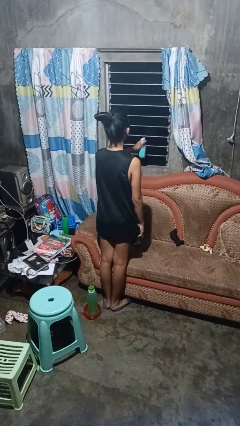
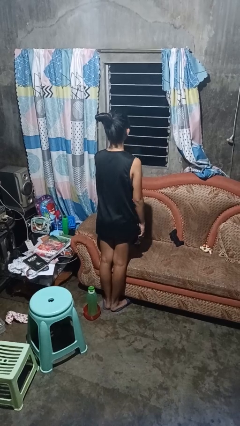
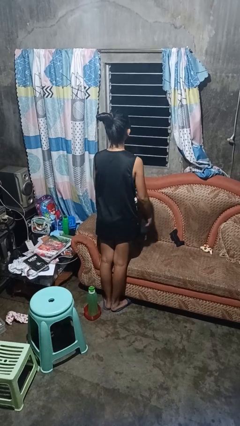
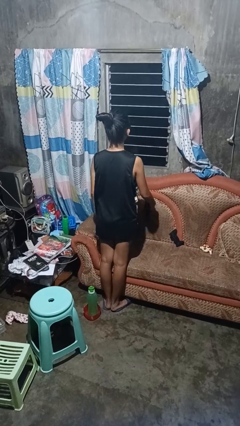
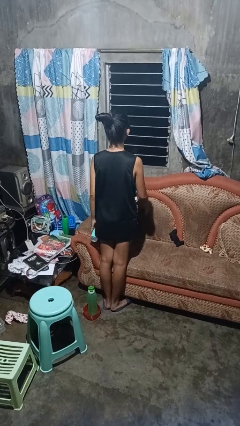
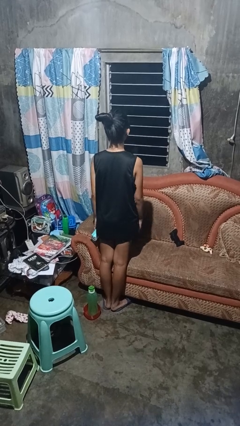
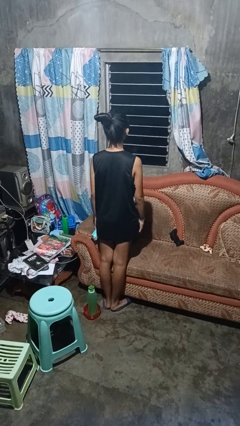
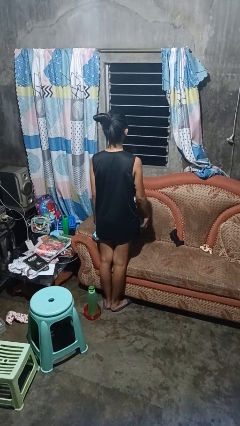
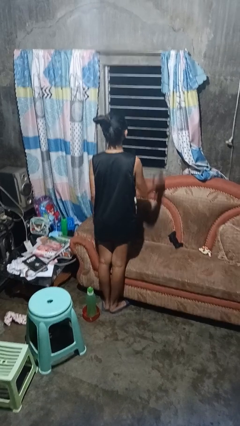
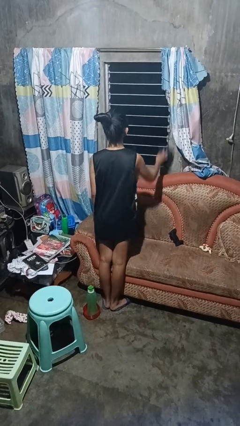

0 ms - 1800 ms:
person sprays from bottle

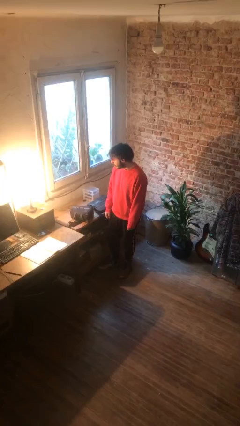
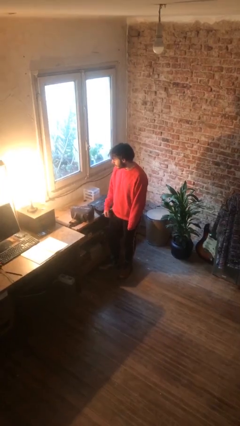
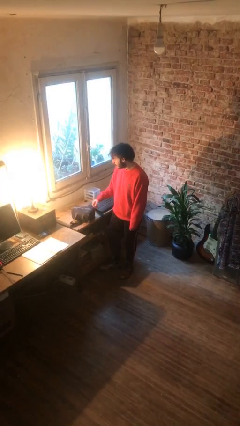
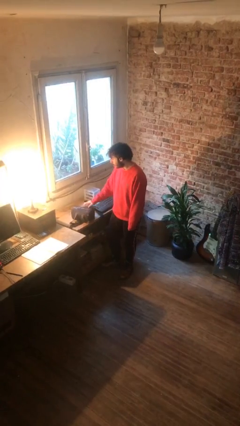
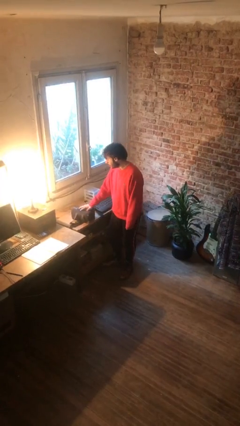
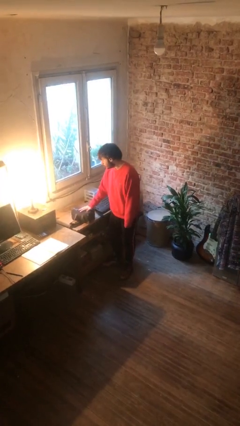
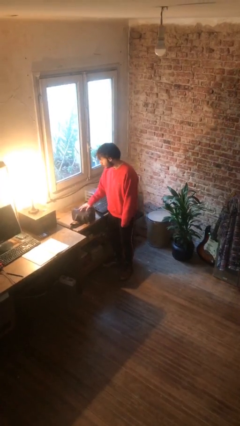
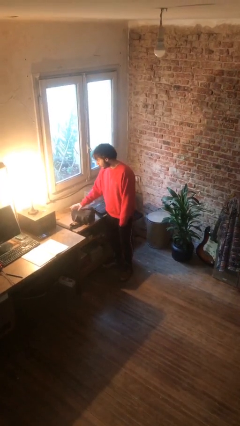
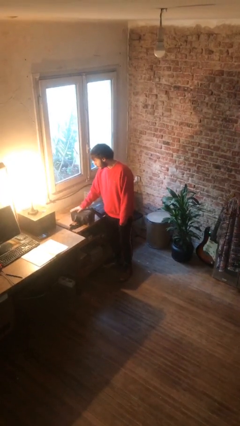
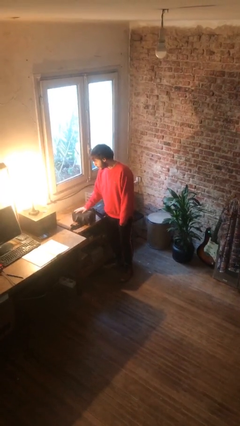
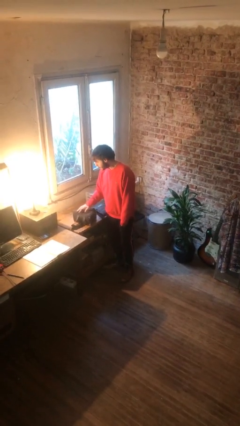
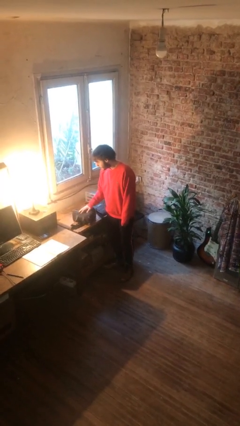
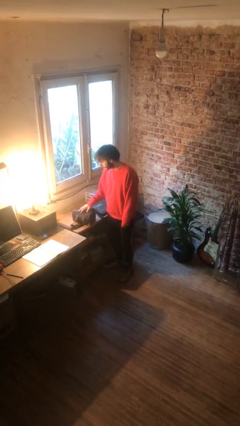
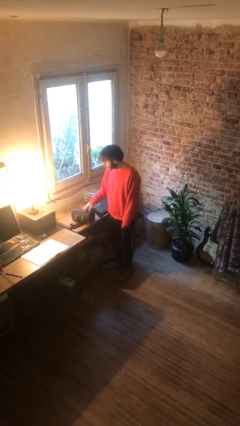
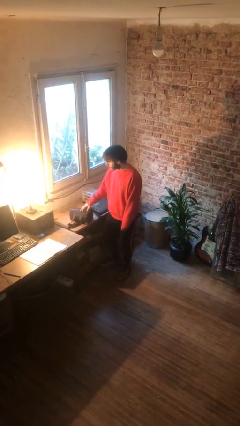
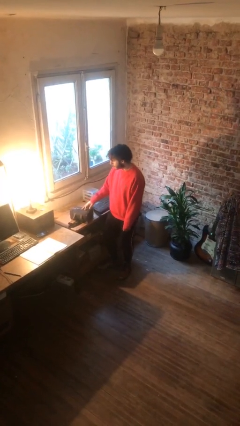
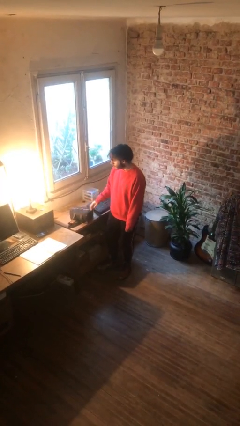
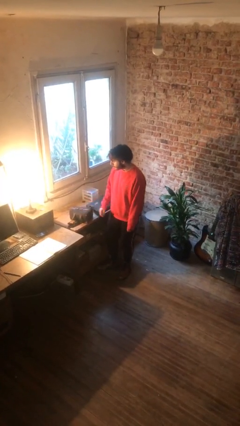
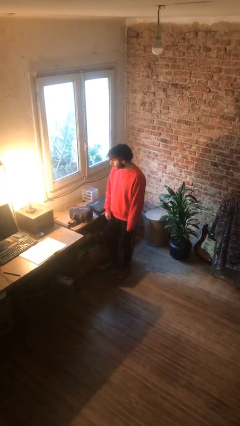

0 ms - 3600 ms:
person taps object with finger

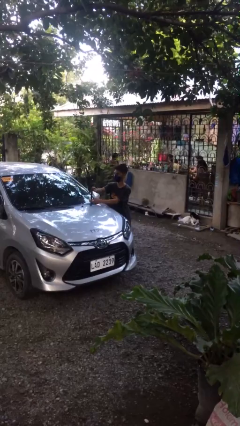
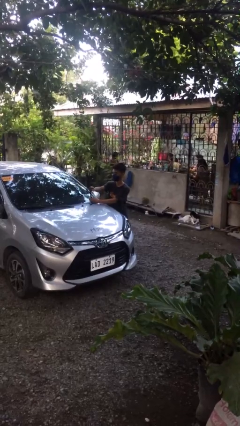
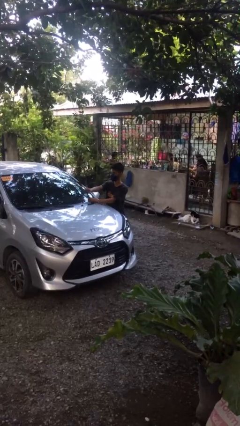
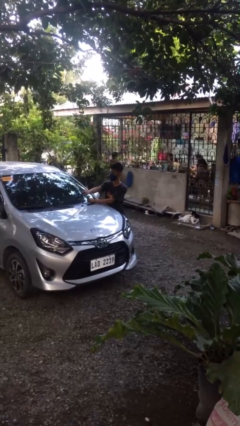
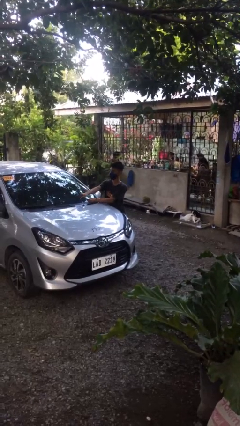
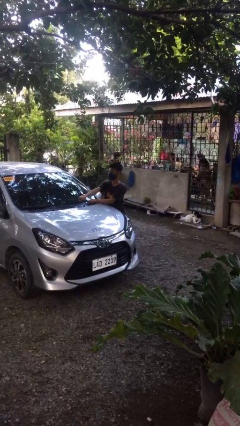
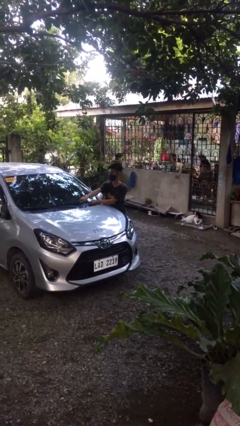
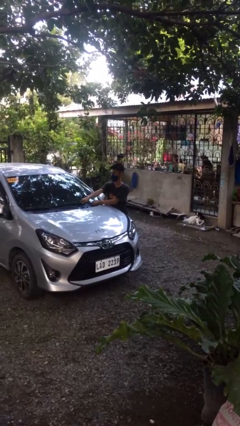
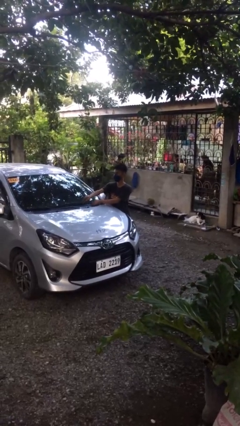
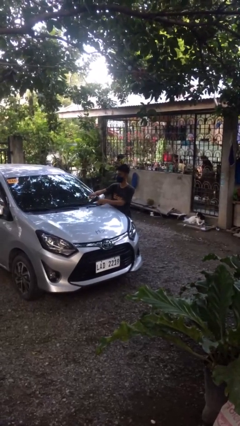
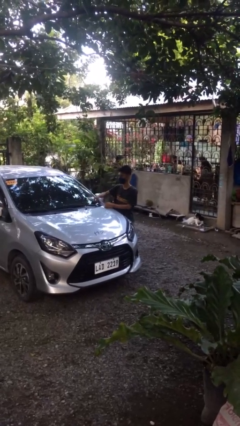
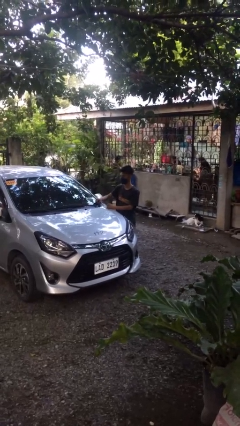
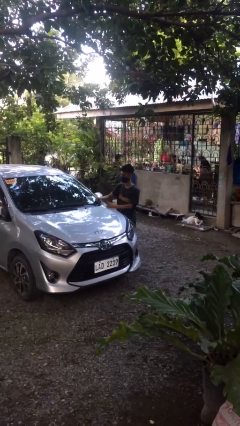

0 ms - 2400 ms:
person flips down car wipers

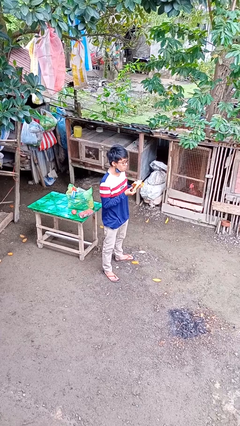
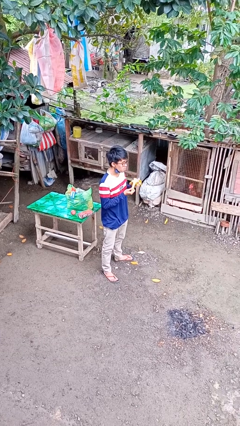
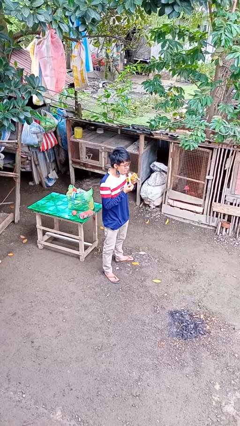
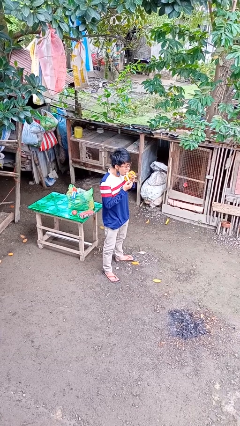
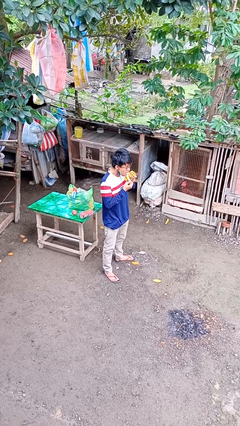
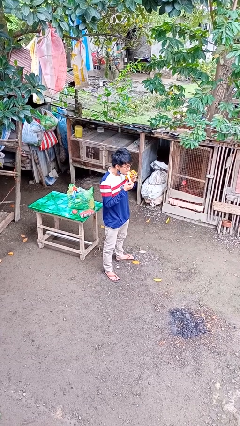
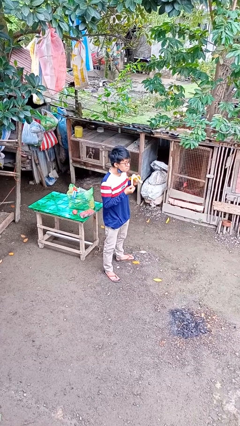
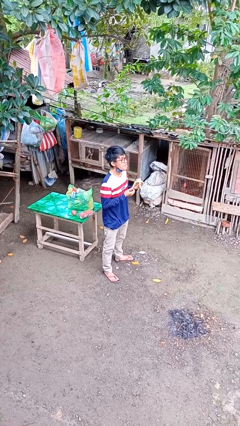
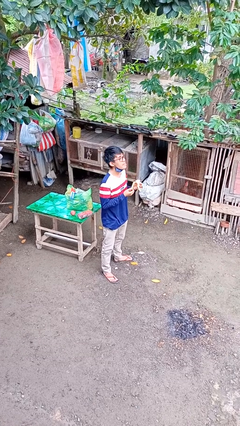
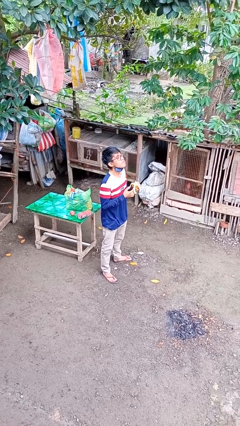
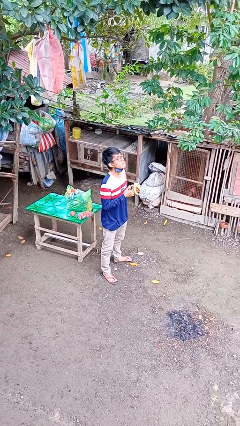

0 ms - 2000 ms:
person eats banana

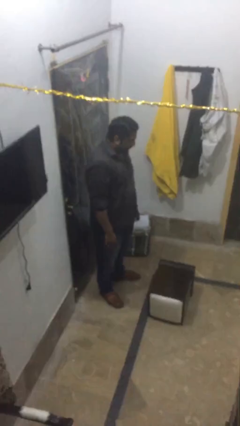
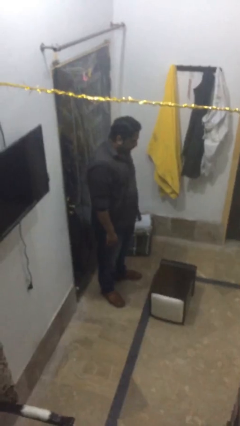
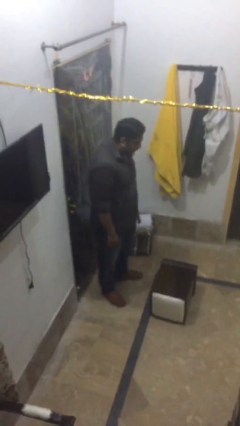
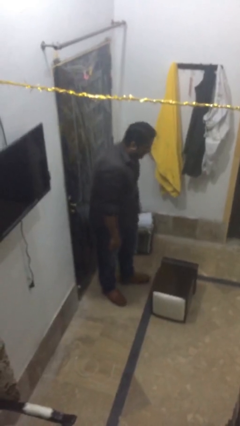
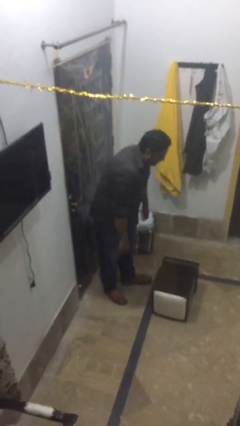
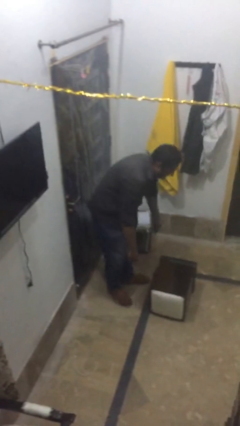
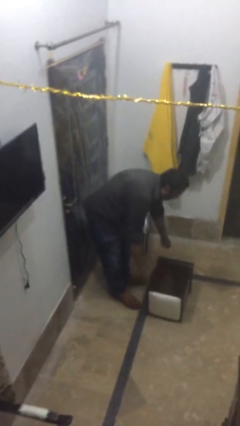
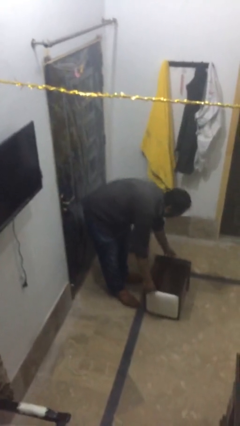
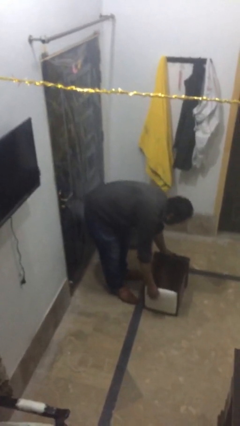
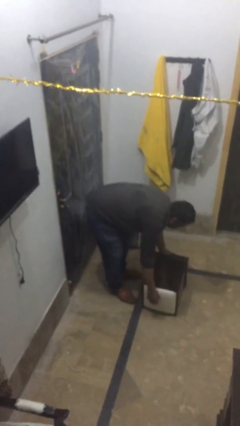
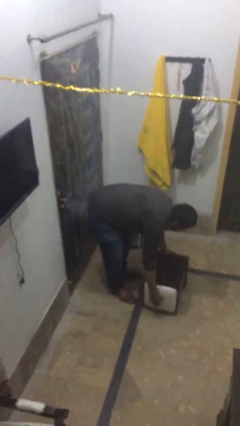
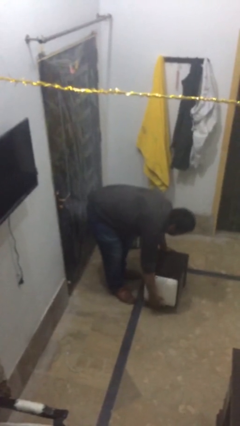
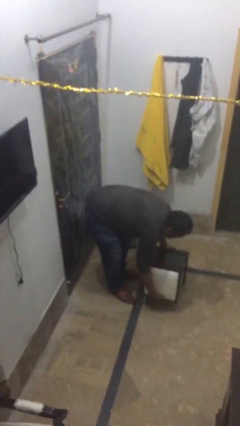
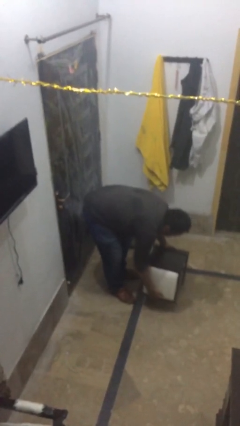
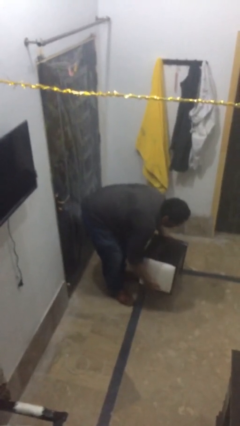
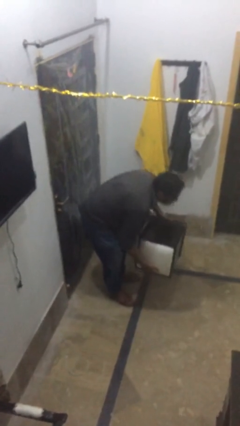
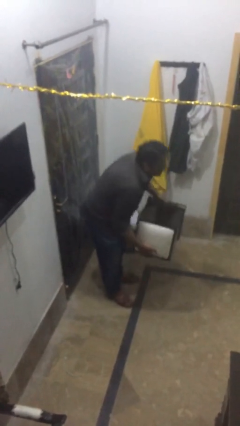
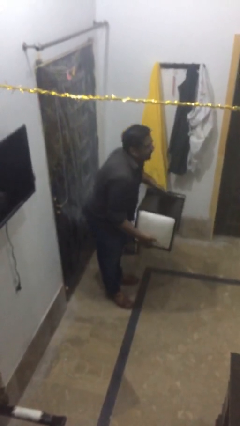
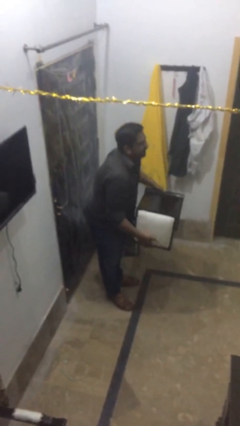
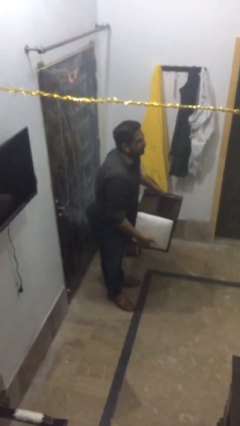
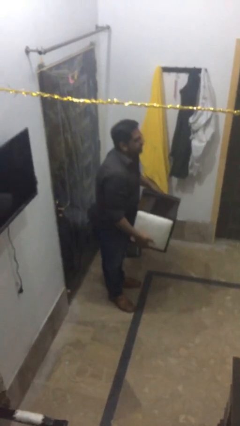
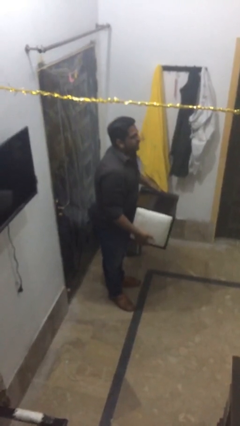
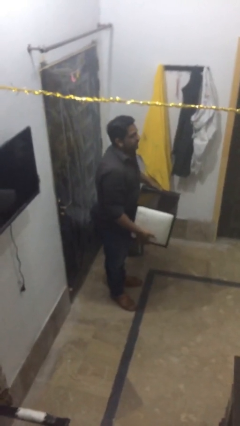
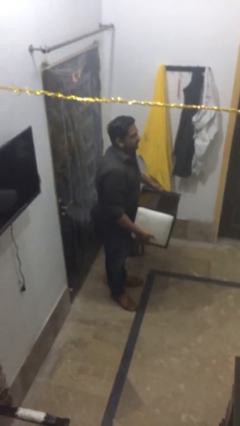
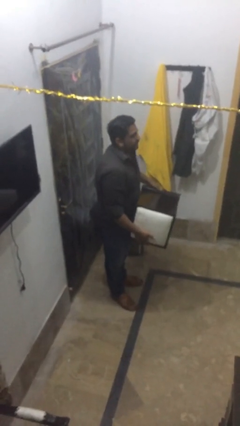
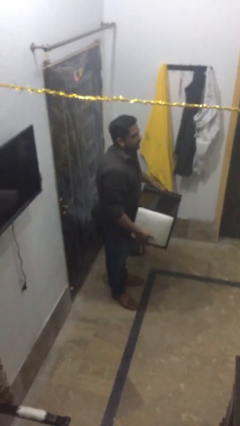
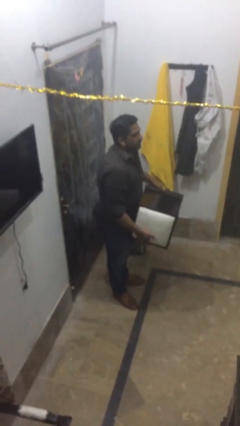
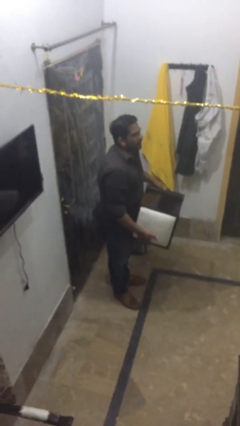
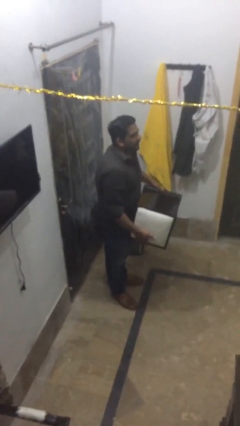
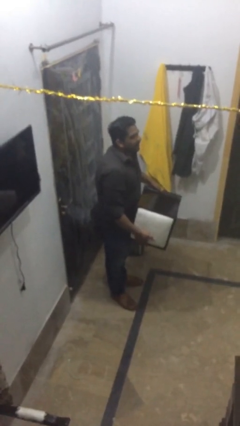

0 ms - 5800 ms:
person picks up object from floor

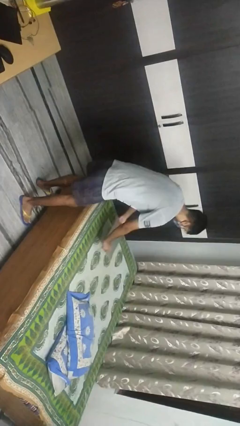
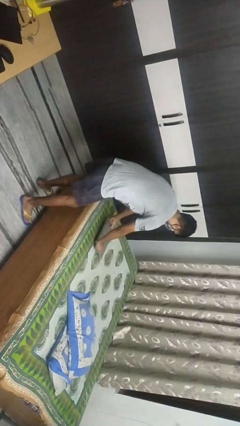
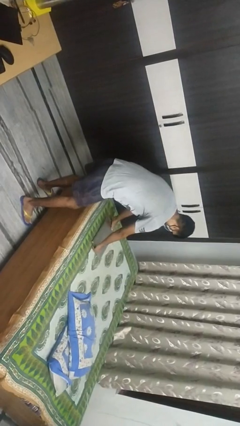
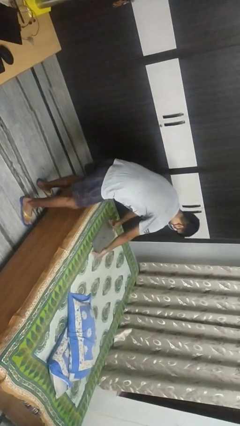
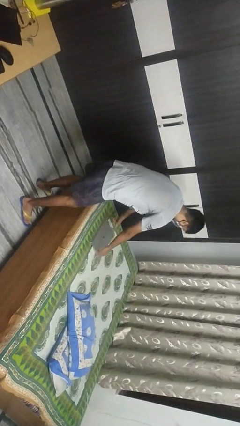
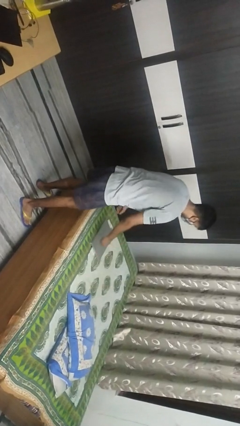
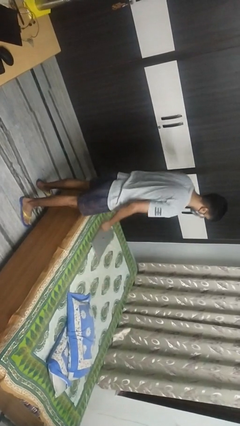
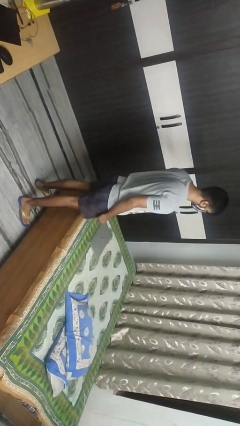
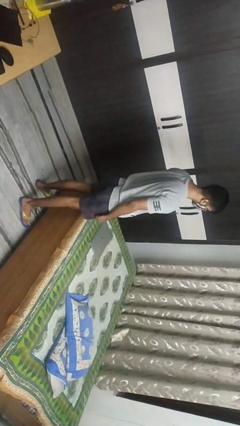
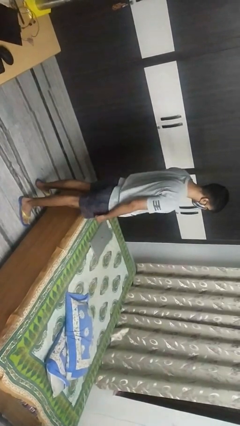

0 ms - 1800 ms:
person puts down object on bed
